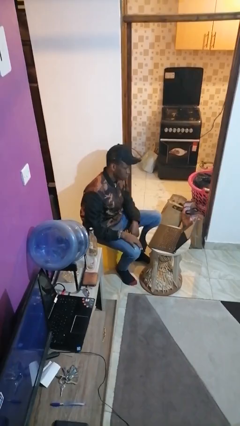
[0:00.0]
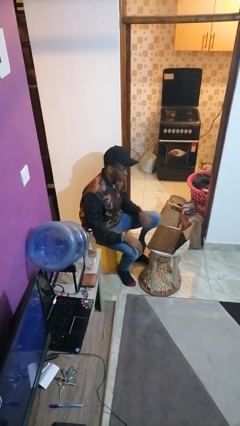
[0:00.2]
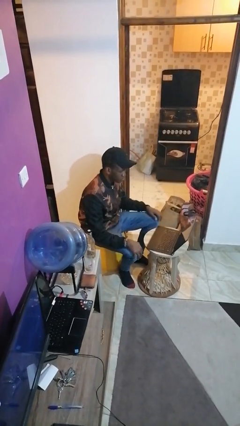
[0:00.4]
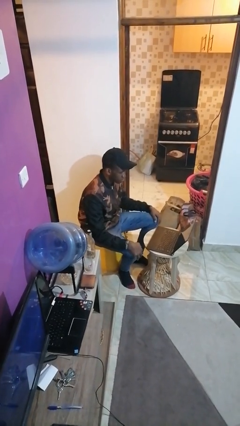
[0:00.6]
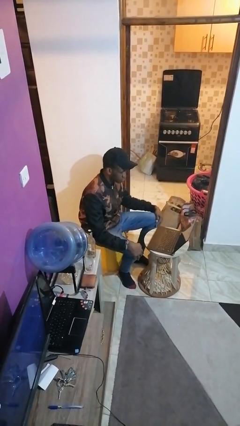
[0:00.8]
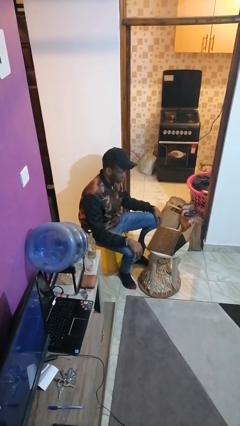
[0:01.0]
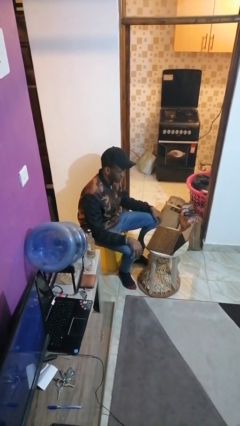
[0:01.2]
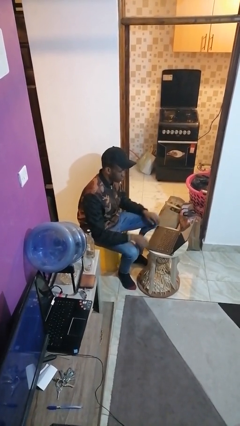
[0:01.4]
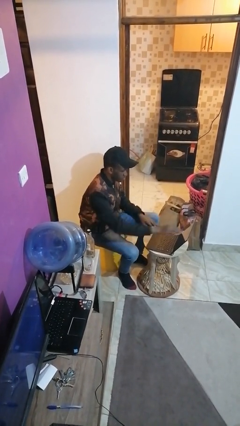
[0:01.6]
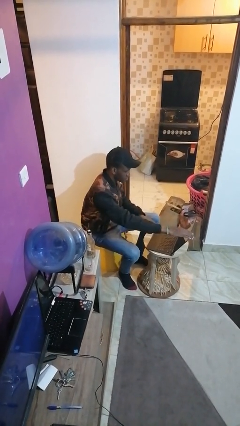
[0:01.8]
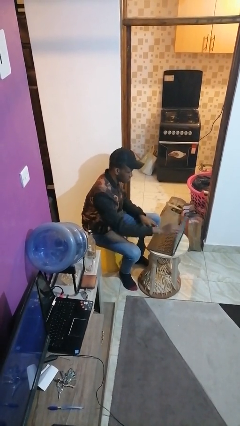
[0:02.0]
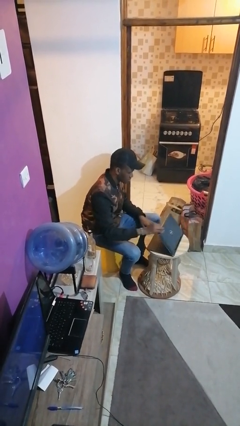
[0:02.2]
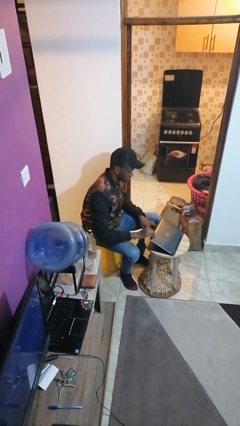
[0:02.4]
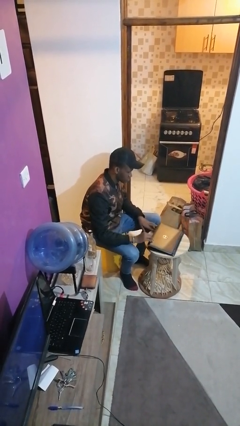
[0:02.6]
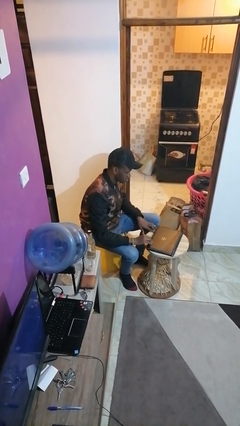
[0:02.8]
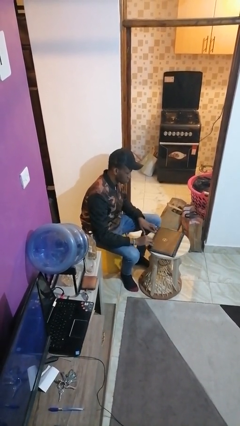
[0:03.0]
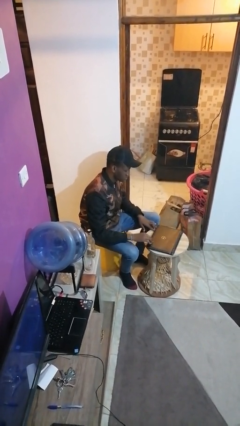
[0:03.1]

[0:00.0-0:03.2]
person closes laptop

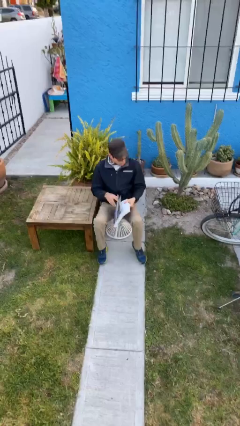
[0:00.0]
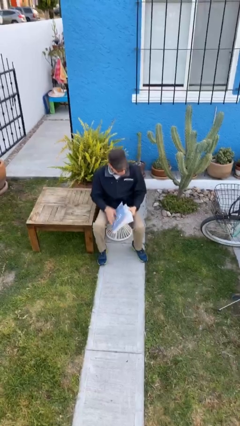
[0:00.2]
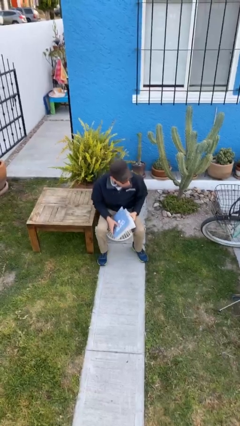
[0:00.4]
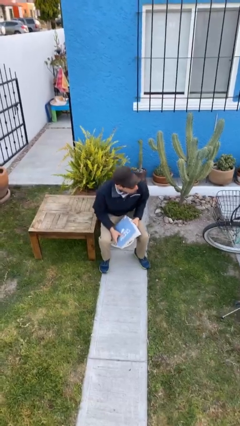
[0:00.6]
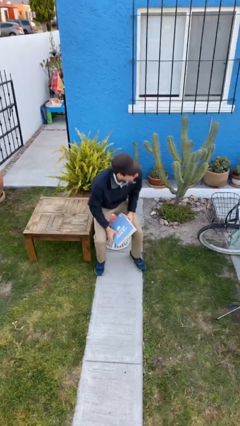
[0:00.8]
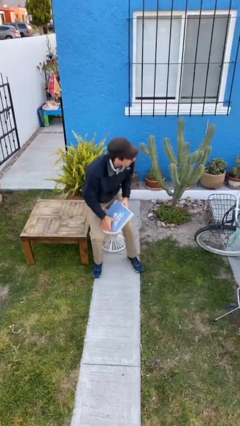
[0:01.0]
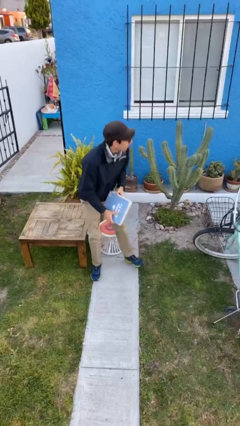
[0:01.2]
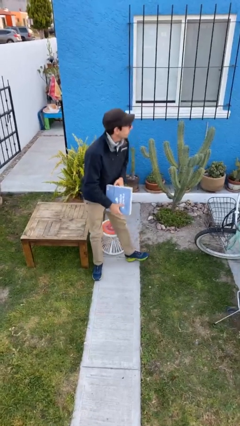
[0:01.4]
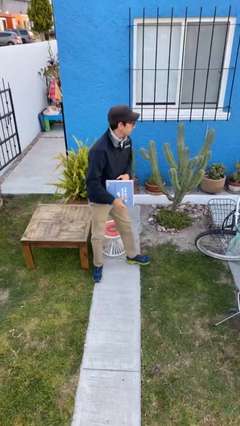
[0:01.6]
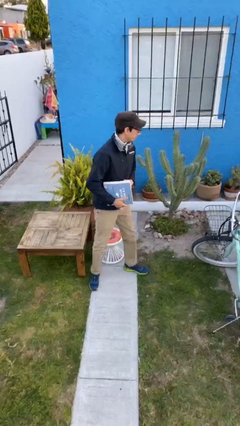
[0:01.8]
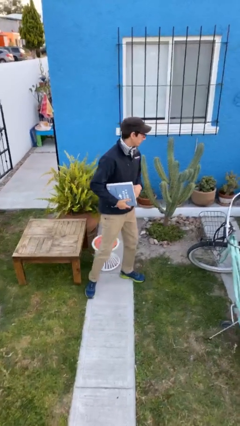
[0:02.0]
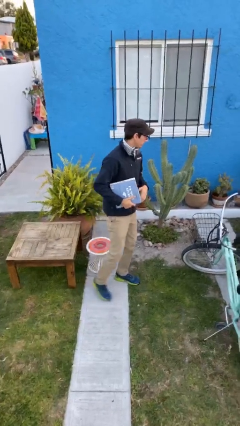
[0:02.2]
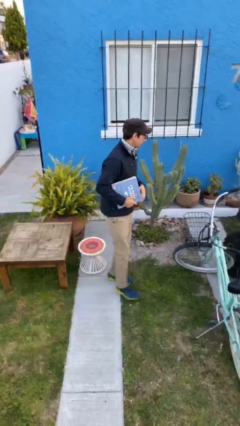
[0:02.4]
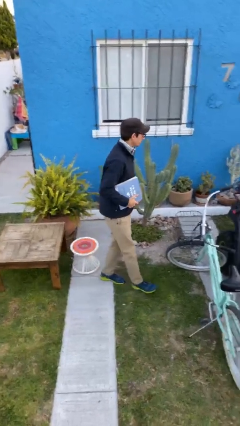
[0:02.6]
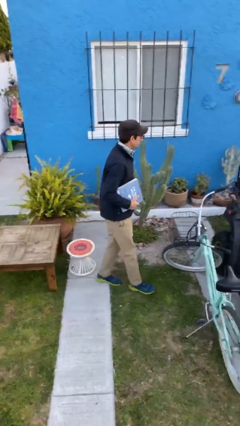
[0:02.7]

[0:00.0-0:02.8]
person stands up

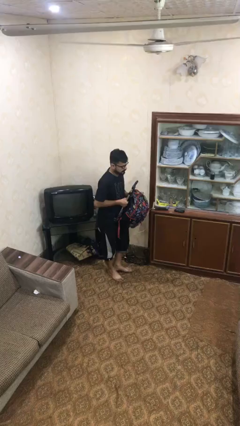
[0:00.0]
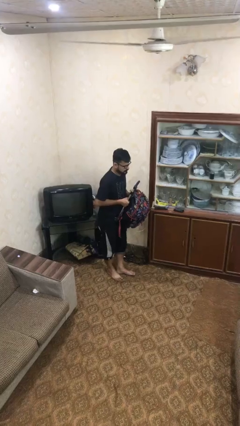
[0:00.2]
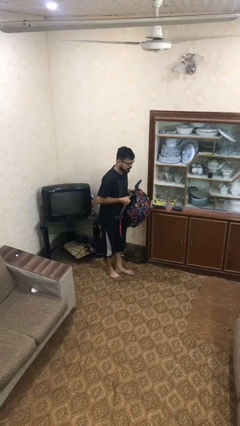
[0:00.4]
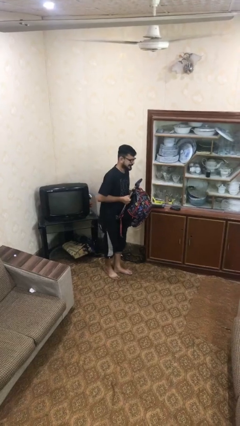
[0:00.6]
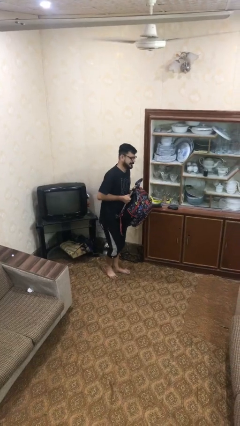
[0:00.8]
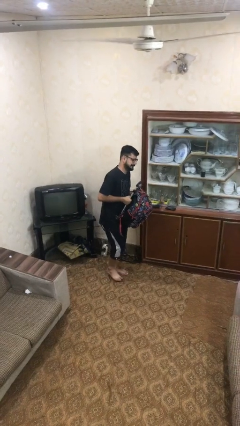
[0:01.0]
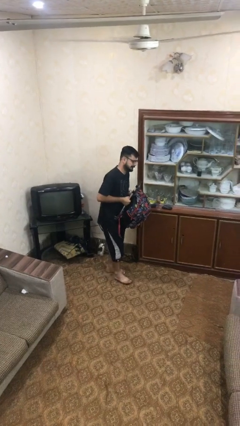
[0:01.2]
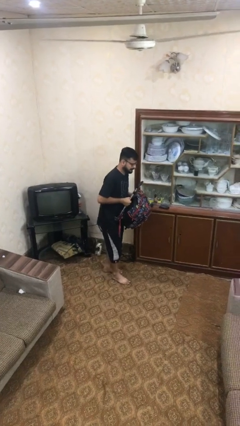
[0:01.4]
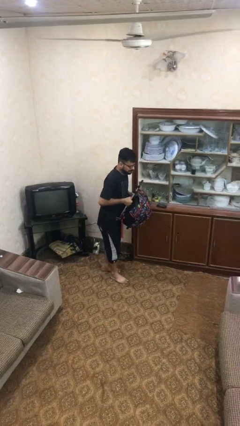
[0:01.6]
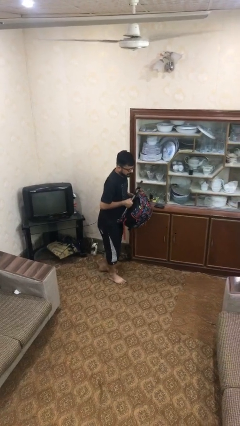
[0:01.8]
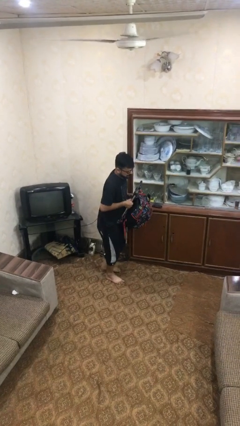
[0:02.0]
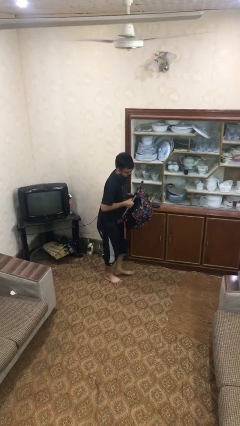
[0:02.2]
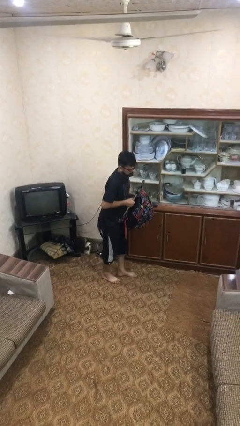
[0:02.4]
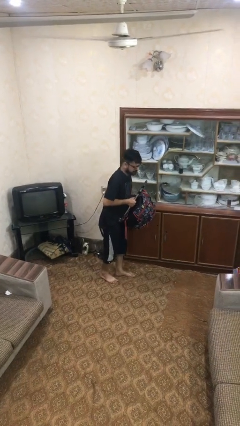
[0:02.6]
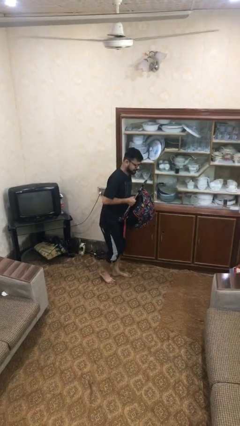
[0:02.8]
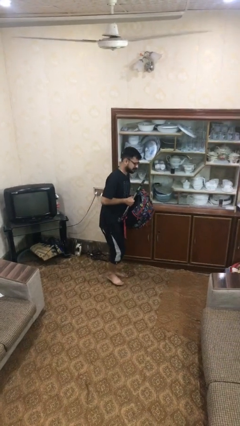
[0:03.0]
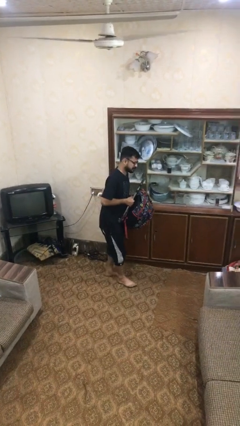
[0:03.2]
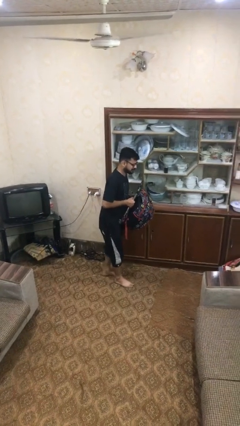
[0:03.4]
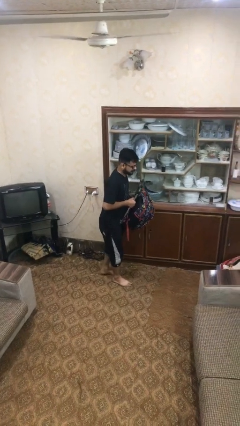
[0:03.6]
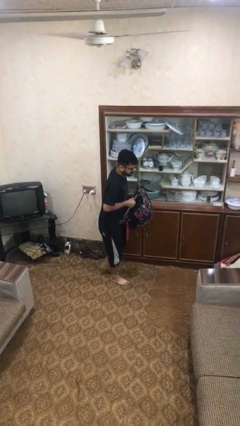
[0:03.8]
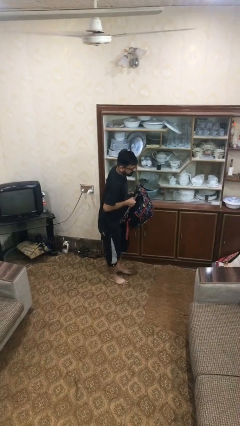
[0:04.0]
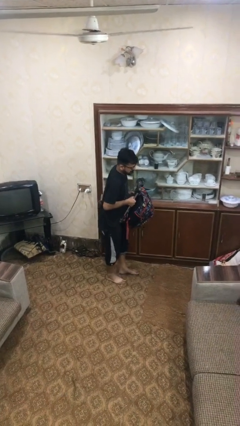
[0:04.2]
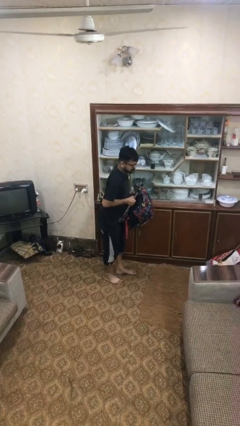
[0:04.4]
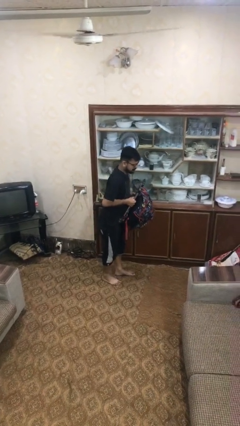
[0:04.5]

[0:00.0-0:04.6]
person carries heavy object

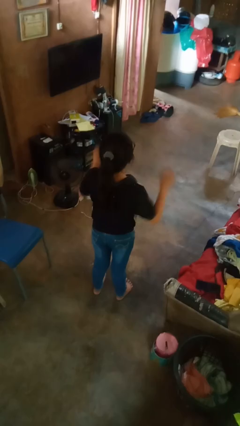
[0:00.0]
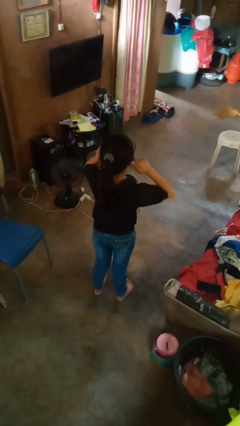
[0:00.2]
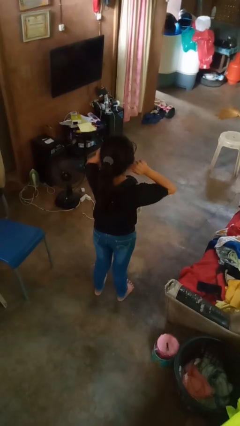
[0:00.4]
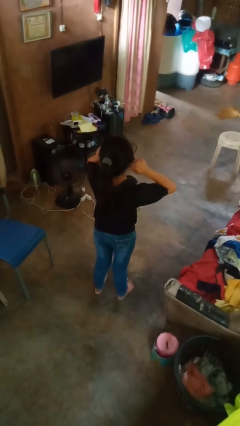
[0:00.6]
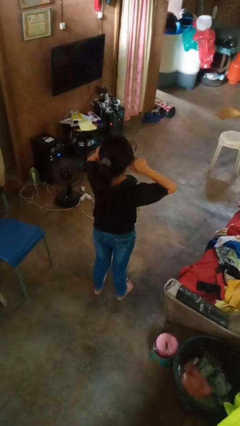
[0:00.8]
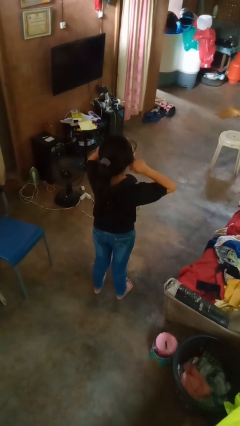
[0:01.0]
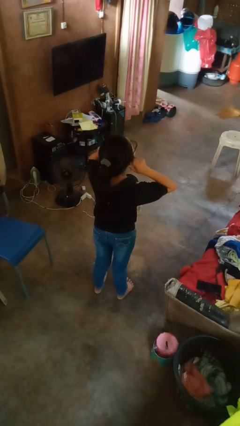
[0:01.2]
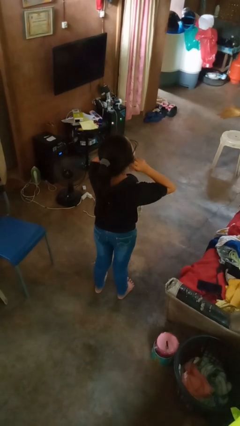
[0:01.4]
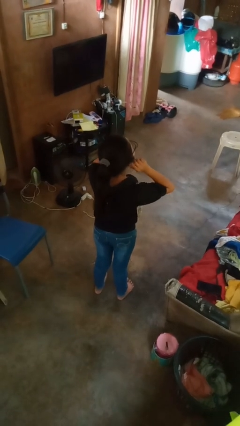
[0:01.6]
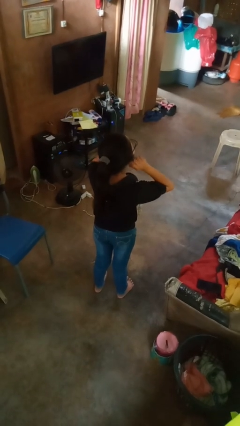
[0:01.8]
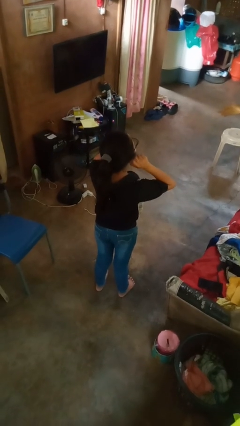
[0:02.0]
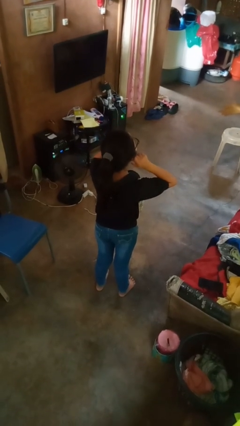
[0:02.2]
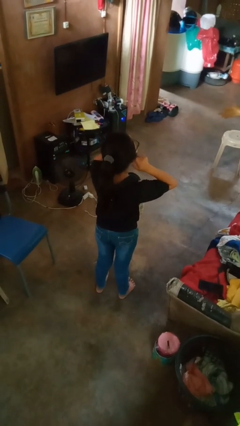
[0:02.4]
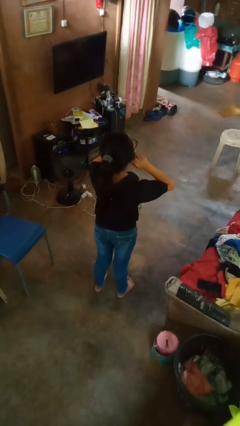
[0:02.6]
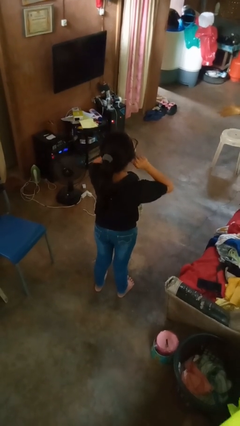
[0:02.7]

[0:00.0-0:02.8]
person touches earlobe

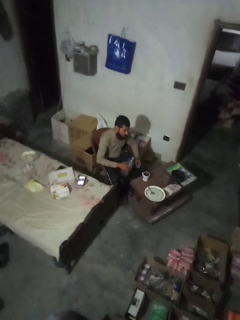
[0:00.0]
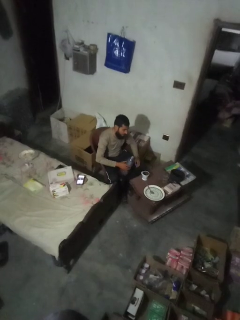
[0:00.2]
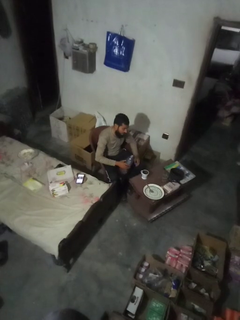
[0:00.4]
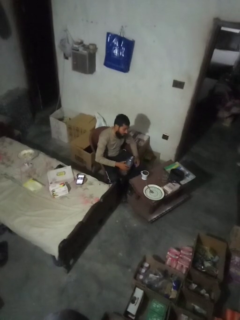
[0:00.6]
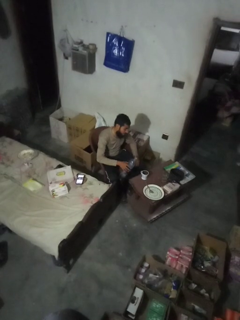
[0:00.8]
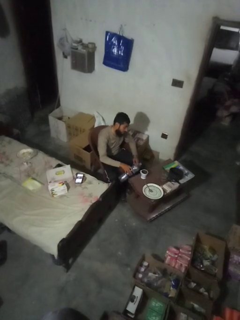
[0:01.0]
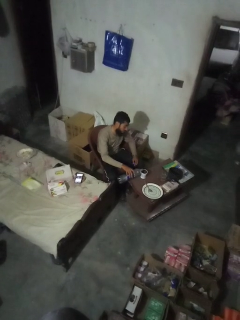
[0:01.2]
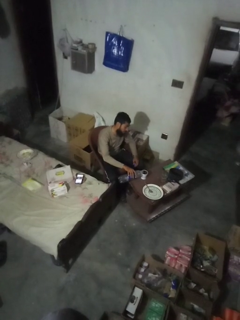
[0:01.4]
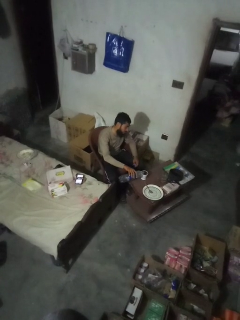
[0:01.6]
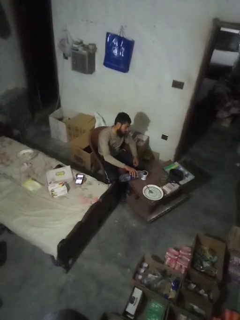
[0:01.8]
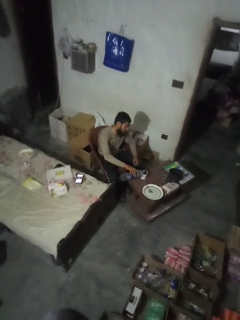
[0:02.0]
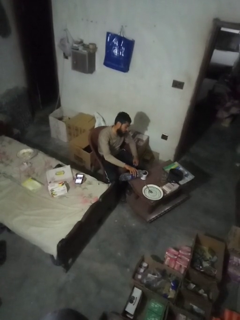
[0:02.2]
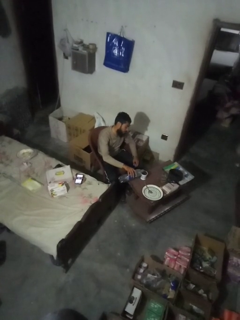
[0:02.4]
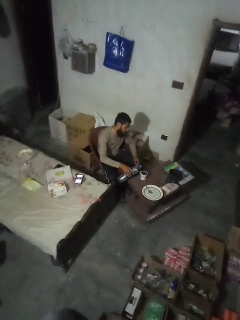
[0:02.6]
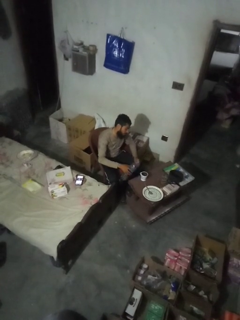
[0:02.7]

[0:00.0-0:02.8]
person pours liquid into cup

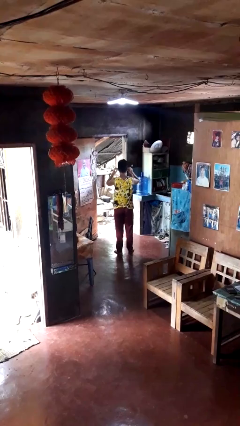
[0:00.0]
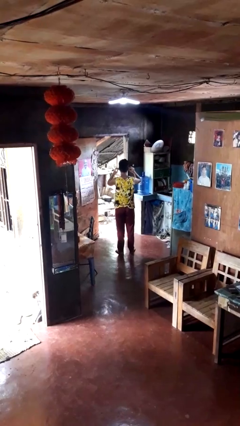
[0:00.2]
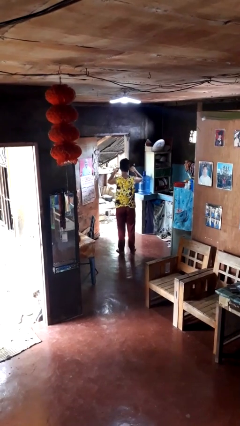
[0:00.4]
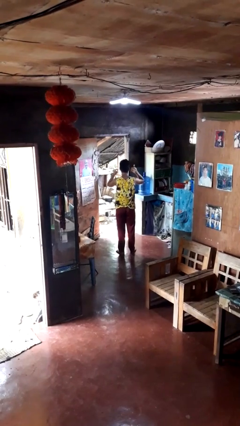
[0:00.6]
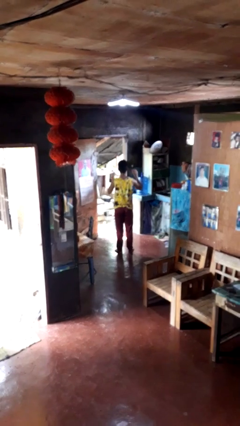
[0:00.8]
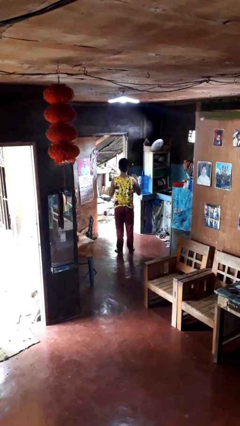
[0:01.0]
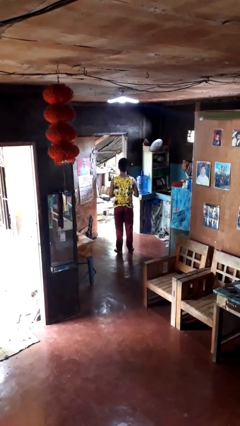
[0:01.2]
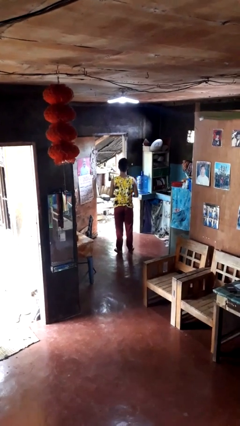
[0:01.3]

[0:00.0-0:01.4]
person takes off headphones

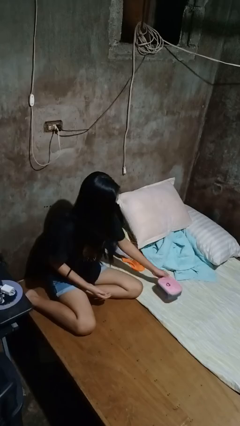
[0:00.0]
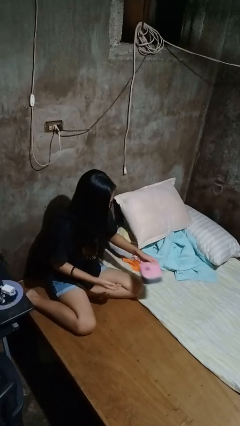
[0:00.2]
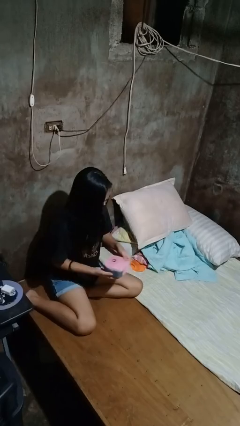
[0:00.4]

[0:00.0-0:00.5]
person picks up object from bed
